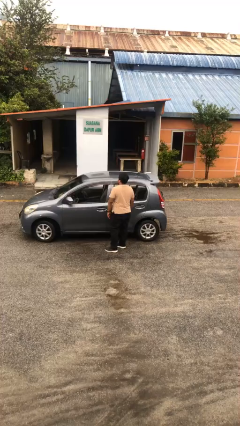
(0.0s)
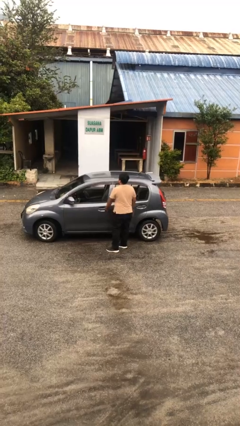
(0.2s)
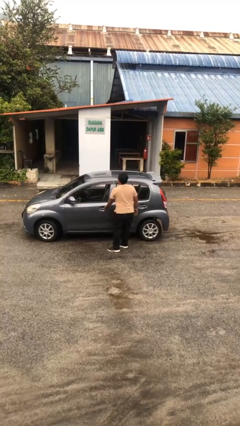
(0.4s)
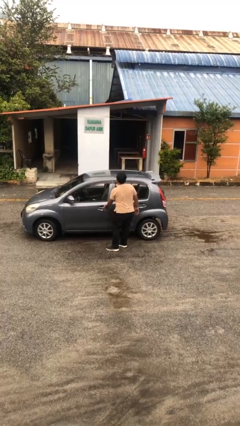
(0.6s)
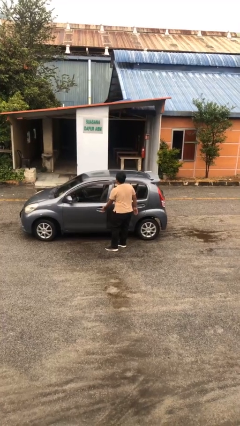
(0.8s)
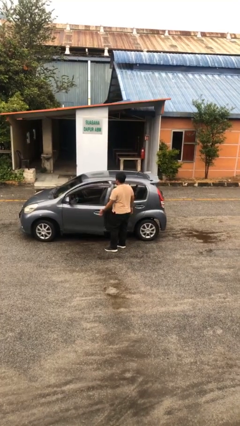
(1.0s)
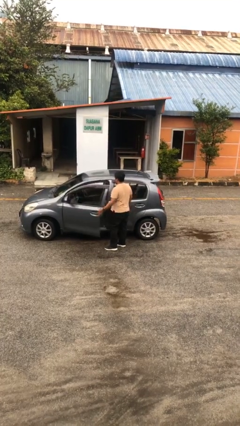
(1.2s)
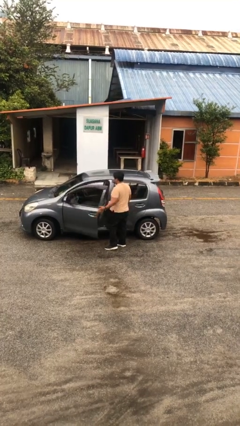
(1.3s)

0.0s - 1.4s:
person opens car door

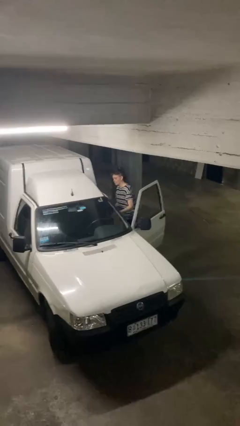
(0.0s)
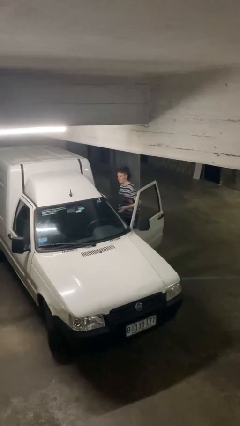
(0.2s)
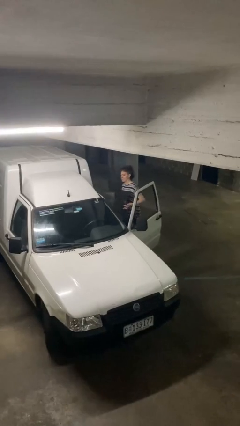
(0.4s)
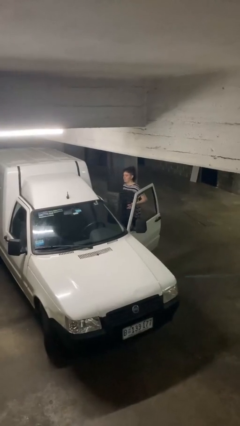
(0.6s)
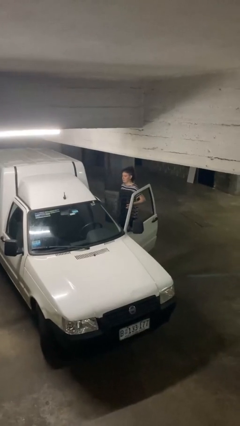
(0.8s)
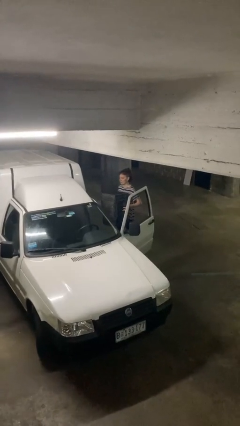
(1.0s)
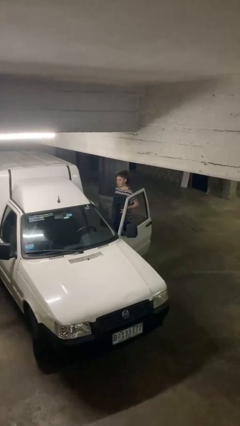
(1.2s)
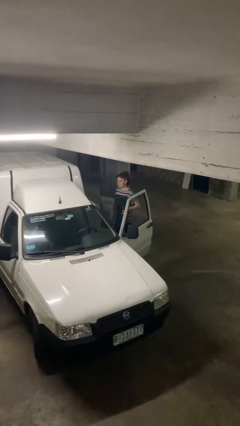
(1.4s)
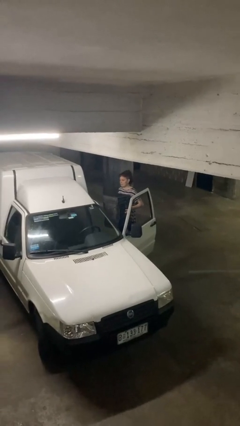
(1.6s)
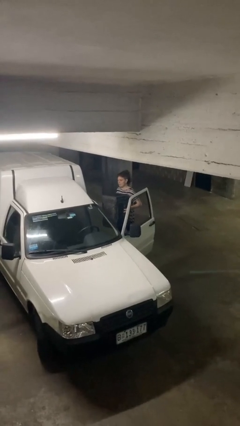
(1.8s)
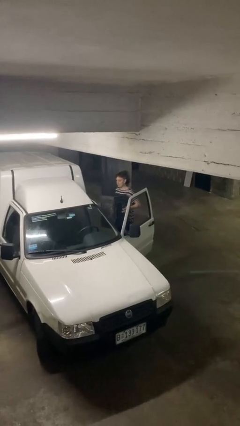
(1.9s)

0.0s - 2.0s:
person unloads car

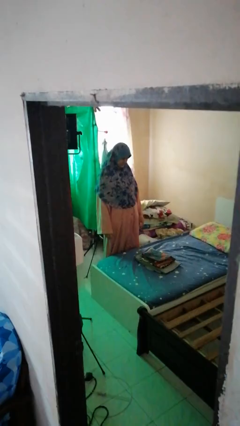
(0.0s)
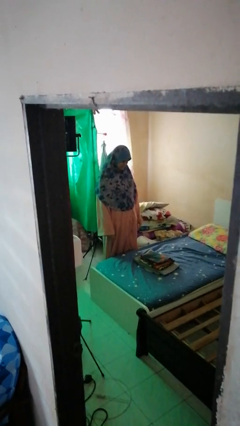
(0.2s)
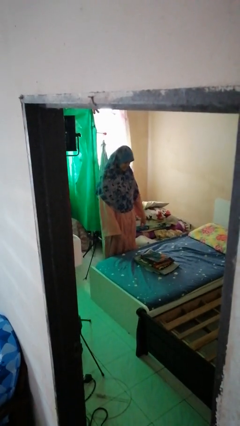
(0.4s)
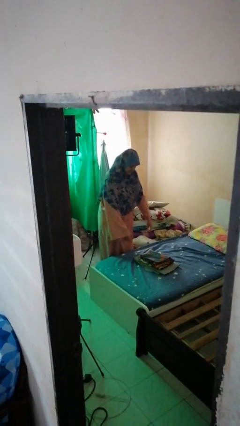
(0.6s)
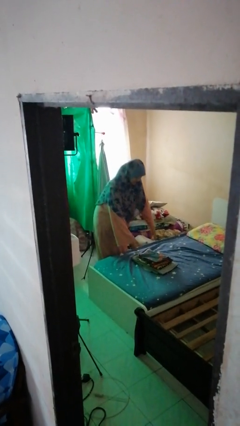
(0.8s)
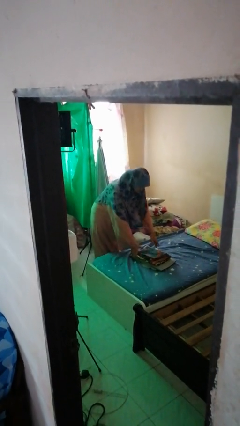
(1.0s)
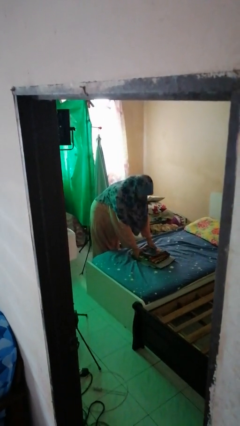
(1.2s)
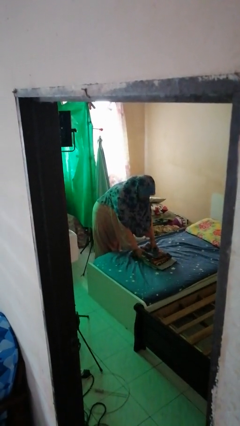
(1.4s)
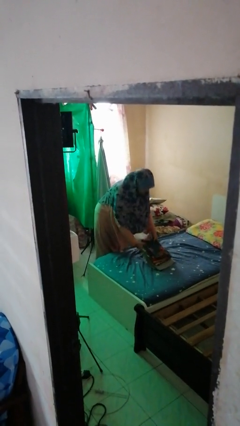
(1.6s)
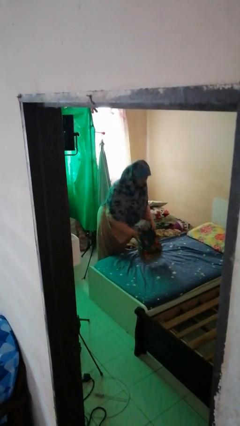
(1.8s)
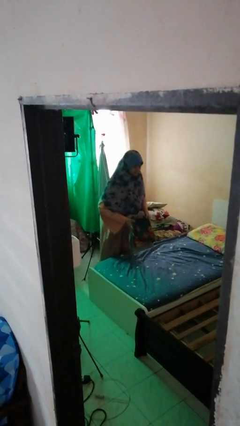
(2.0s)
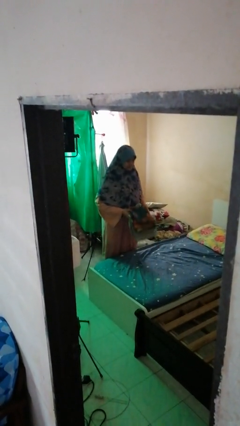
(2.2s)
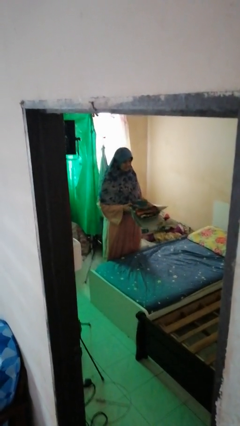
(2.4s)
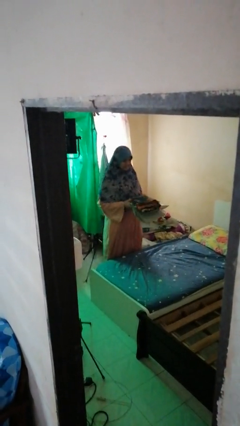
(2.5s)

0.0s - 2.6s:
person picks up object from bed

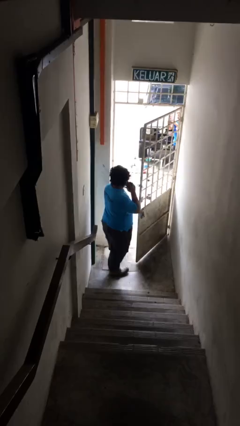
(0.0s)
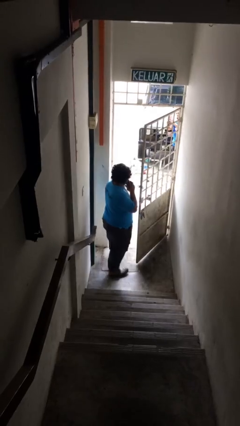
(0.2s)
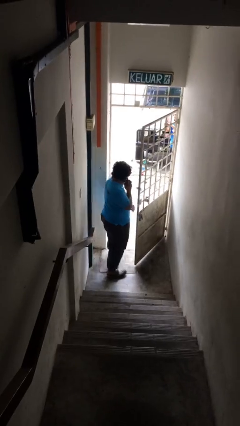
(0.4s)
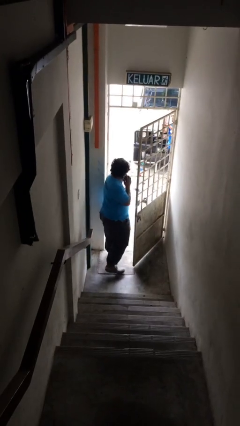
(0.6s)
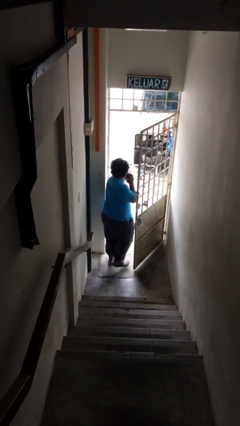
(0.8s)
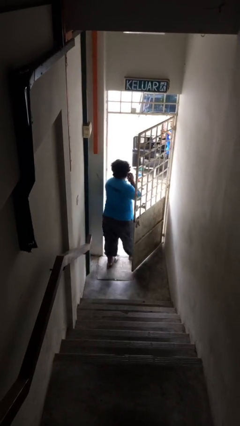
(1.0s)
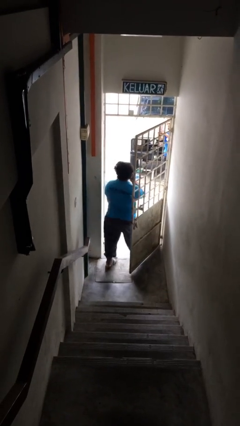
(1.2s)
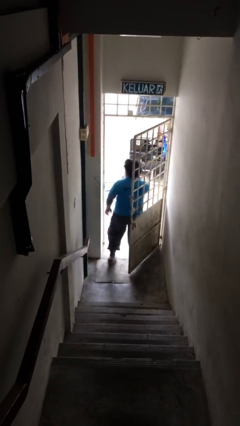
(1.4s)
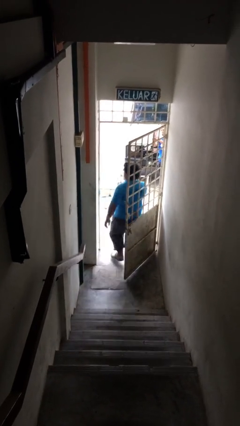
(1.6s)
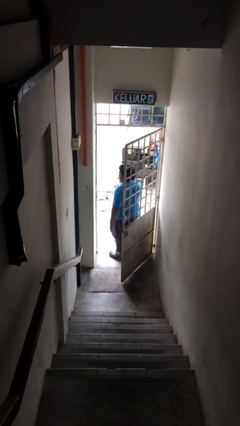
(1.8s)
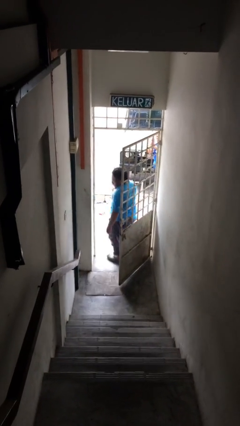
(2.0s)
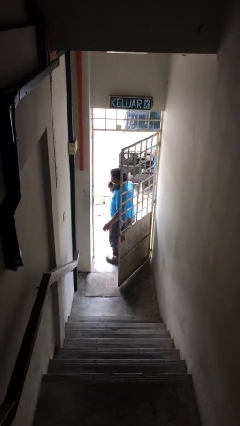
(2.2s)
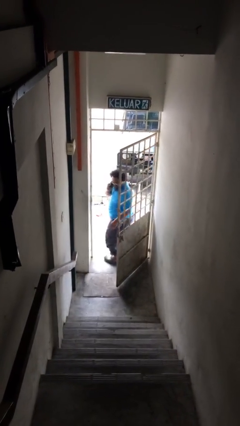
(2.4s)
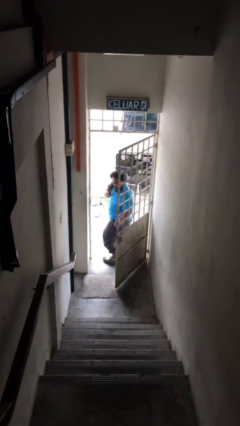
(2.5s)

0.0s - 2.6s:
person exits scene through structure

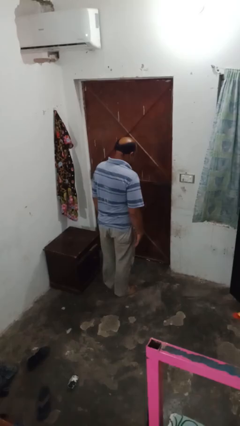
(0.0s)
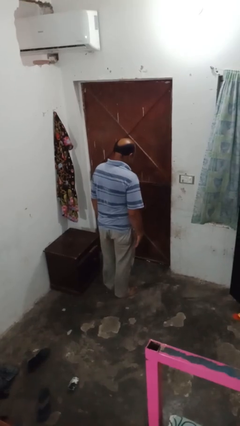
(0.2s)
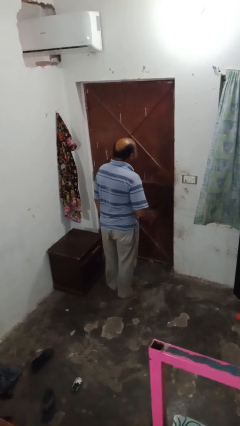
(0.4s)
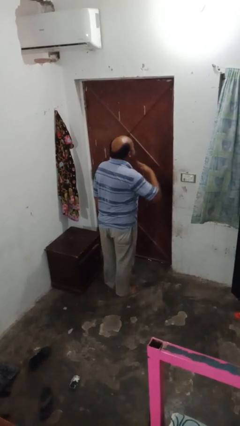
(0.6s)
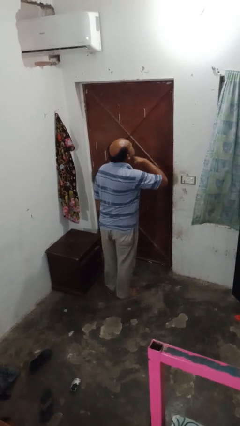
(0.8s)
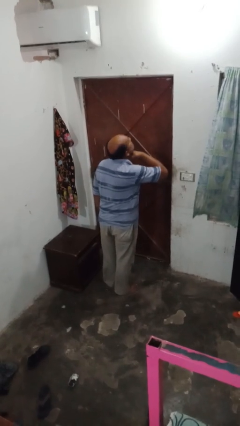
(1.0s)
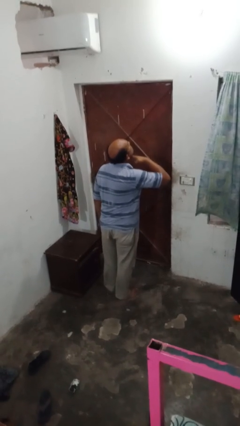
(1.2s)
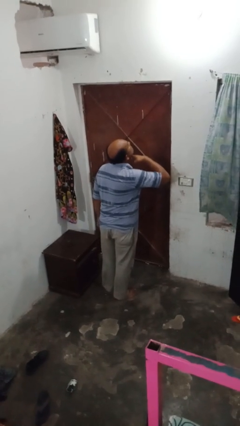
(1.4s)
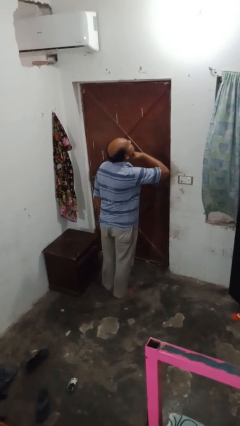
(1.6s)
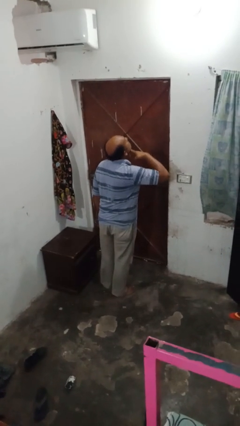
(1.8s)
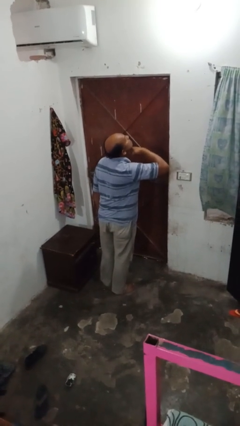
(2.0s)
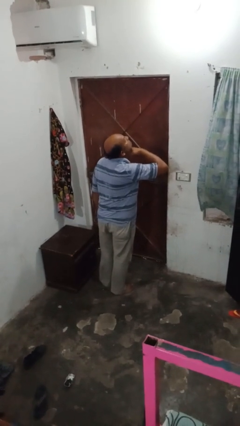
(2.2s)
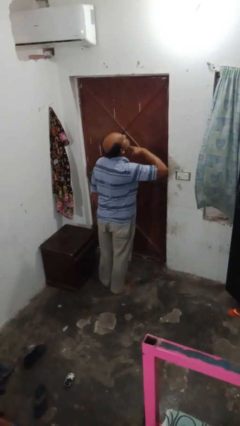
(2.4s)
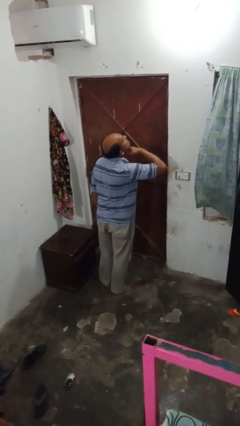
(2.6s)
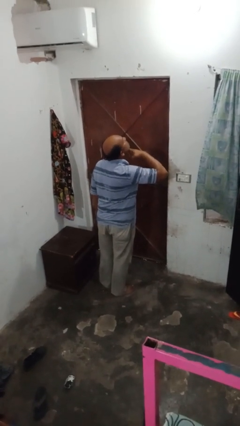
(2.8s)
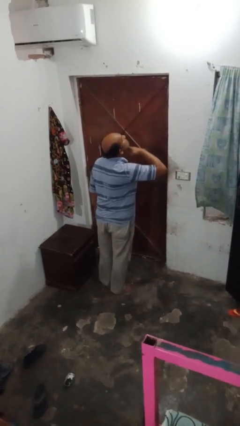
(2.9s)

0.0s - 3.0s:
person gestures cut

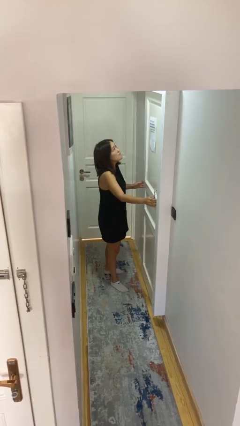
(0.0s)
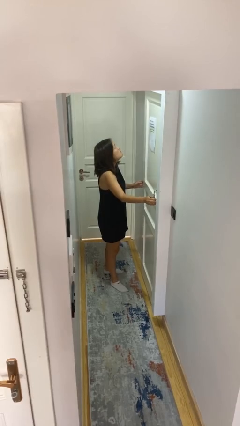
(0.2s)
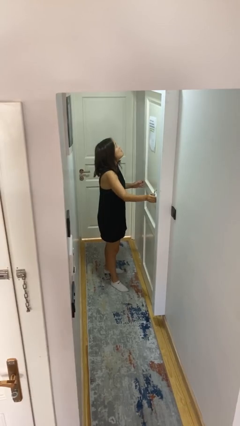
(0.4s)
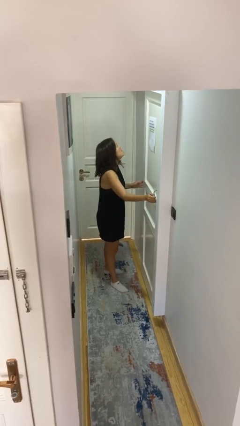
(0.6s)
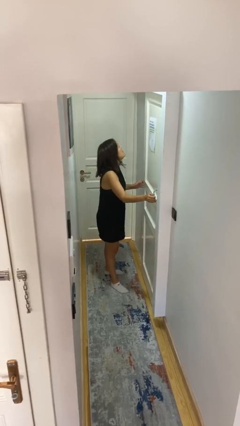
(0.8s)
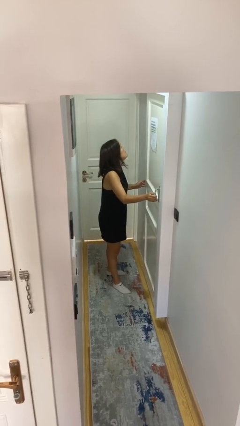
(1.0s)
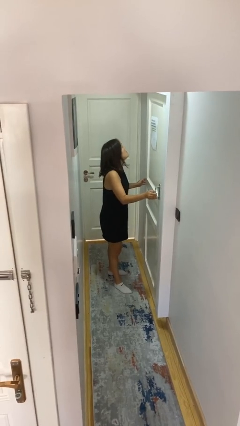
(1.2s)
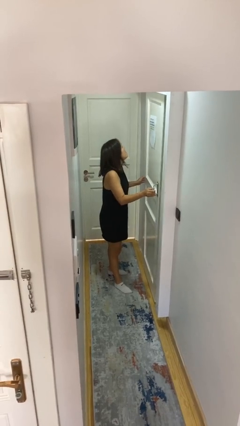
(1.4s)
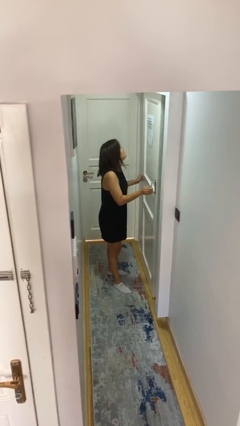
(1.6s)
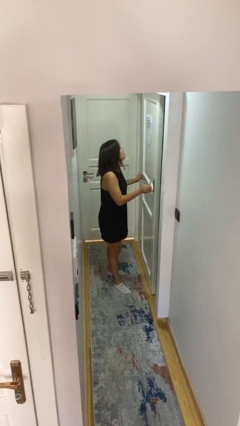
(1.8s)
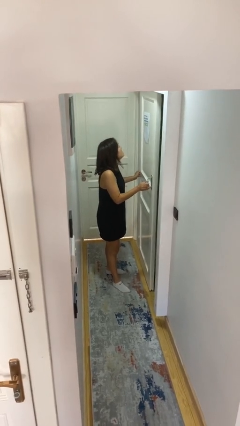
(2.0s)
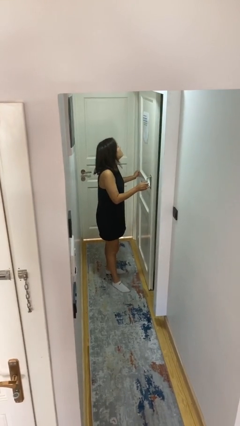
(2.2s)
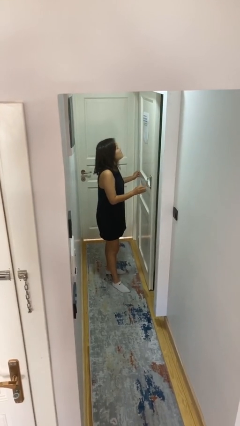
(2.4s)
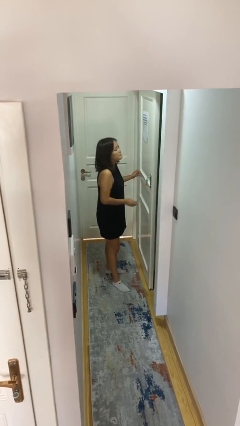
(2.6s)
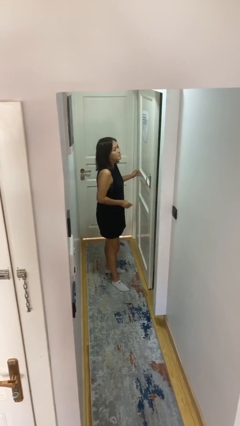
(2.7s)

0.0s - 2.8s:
person opens sliding door

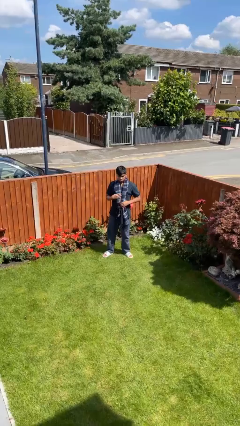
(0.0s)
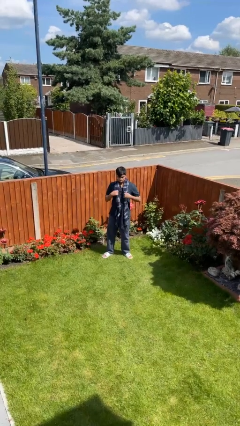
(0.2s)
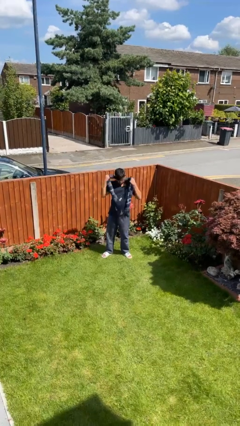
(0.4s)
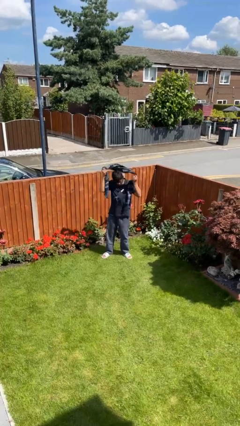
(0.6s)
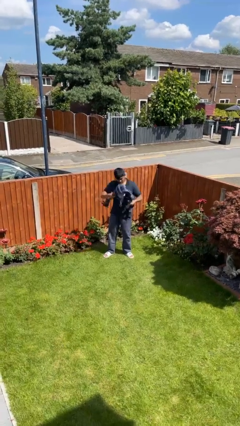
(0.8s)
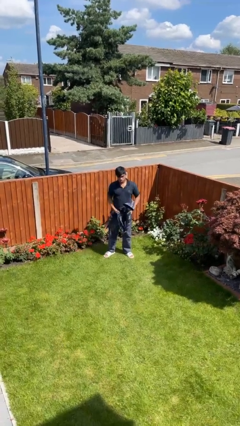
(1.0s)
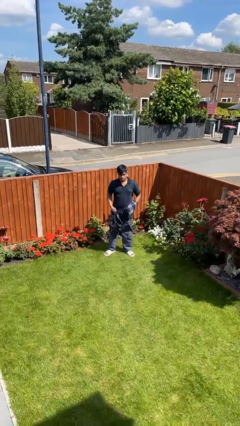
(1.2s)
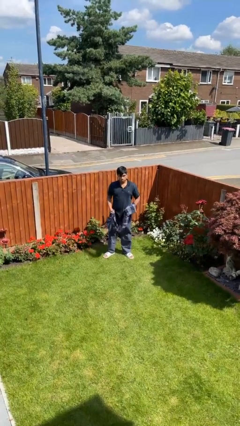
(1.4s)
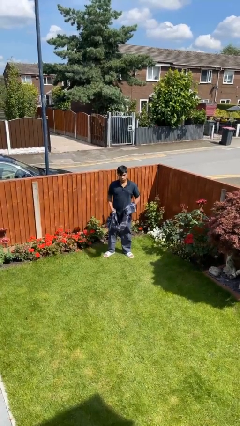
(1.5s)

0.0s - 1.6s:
person takes off scarf

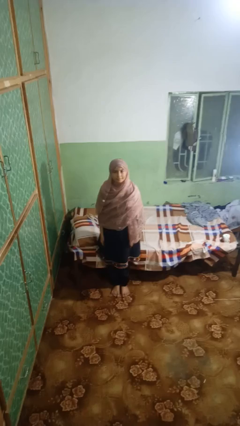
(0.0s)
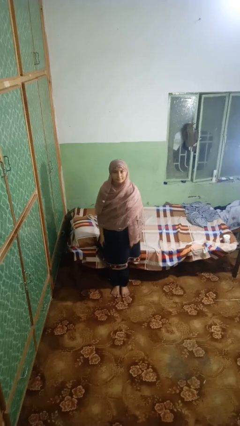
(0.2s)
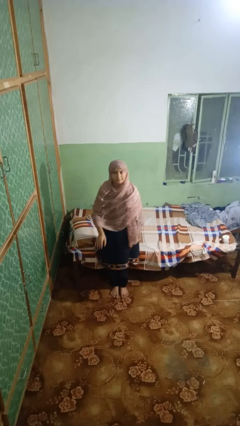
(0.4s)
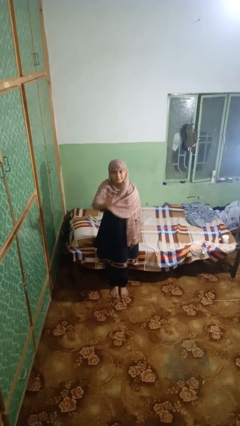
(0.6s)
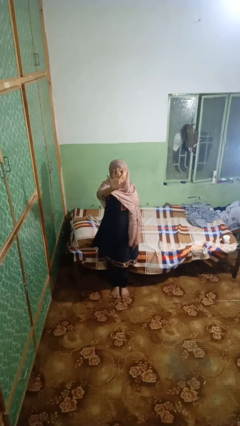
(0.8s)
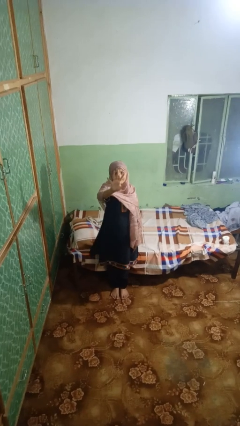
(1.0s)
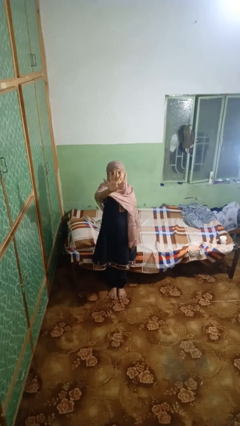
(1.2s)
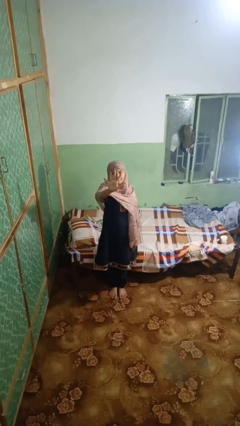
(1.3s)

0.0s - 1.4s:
person gestures number five
